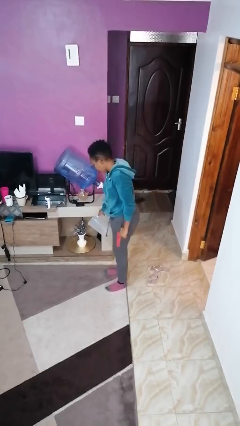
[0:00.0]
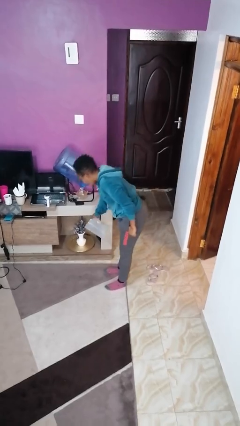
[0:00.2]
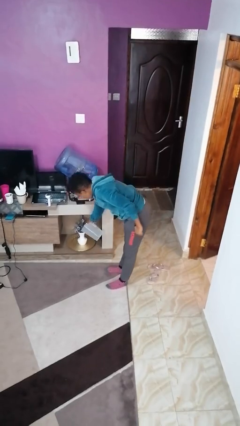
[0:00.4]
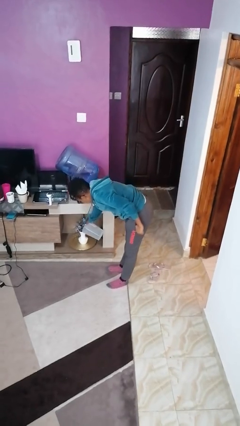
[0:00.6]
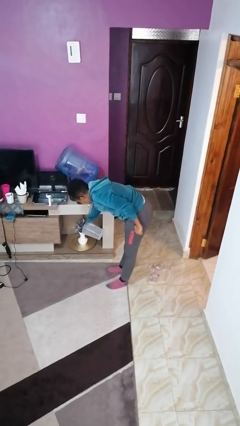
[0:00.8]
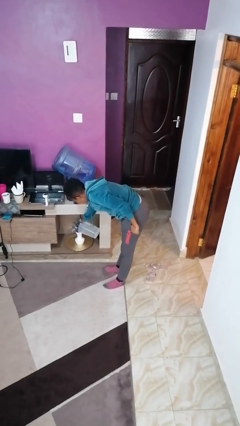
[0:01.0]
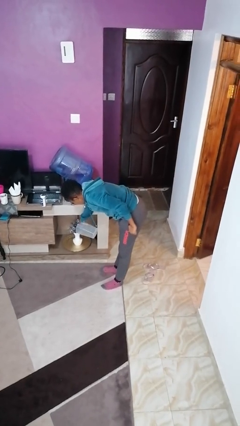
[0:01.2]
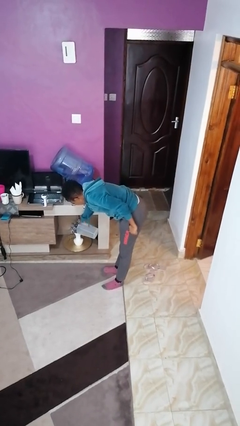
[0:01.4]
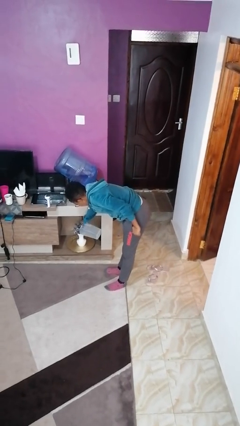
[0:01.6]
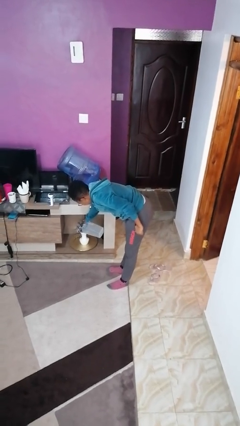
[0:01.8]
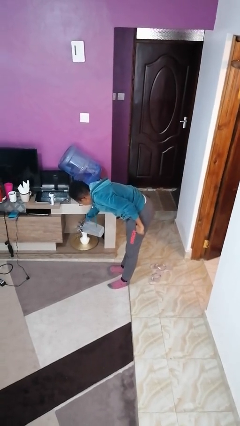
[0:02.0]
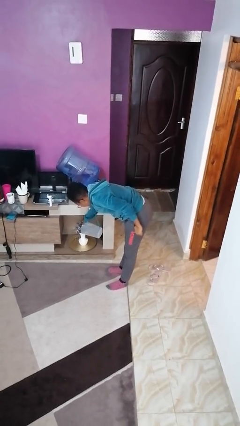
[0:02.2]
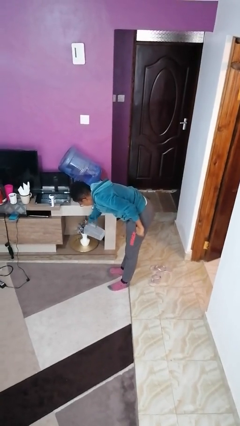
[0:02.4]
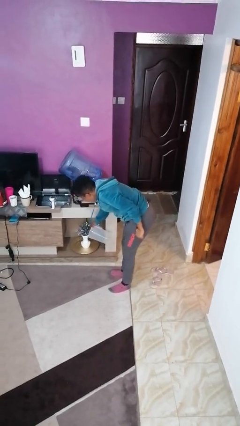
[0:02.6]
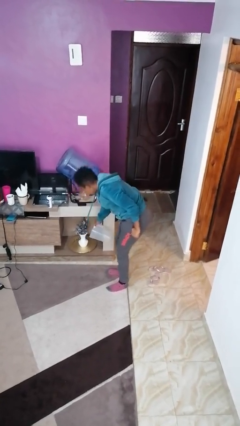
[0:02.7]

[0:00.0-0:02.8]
person waters houseplant

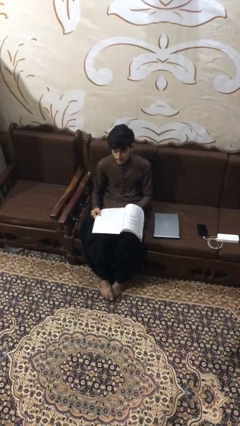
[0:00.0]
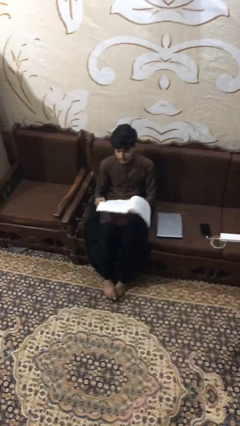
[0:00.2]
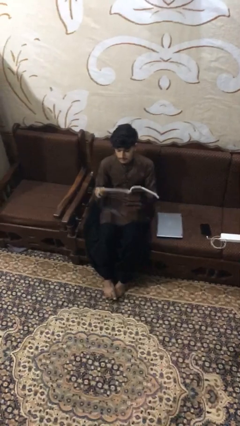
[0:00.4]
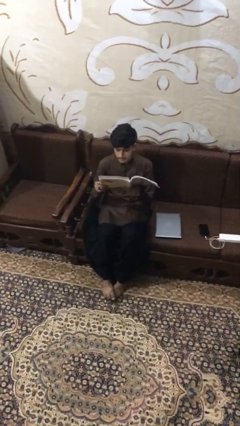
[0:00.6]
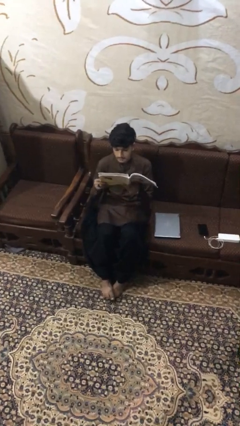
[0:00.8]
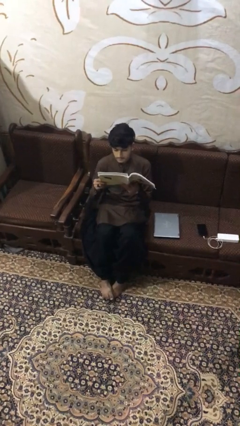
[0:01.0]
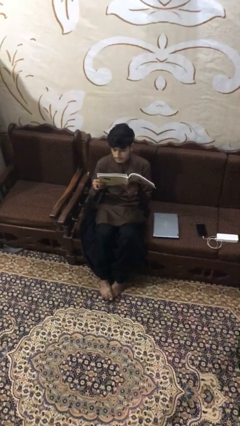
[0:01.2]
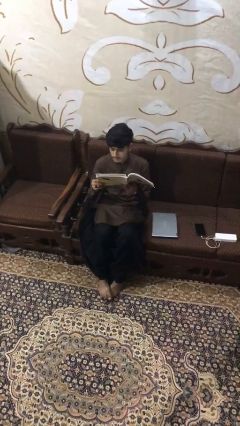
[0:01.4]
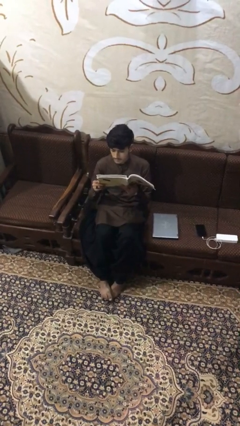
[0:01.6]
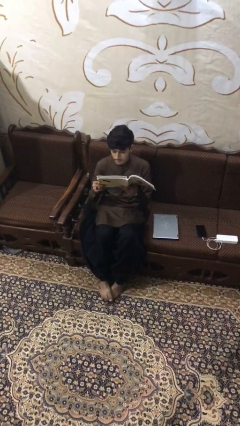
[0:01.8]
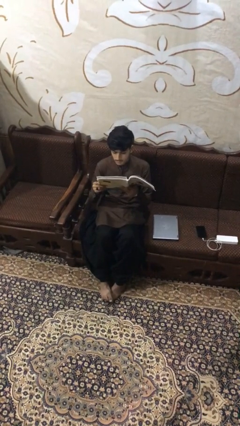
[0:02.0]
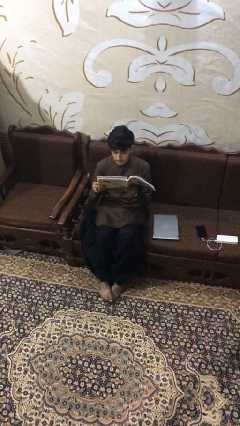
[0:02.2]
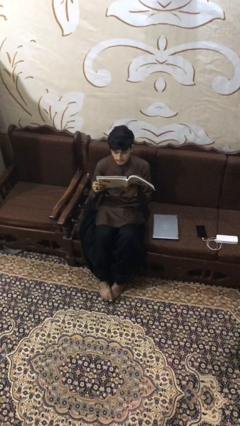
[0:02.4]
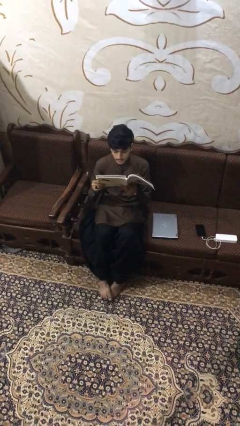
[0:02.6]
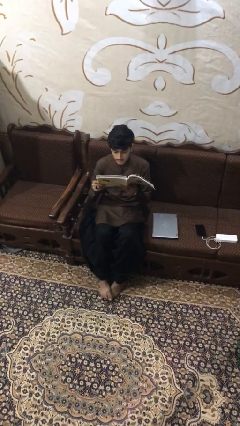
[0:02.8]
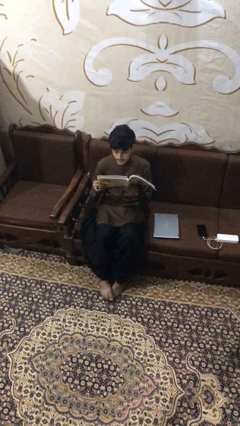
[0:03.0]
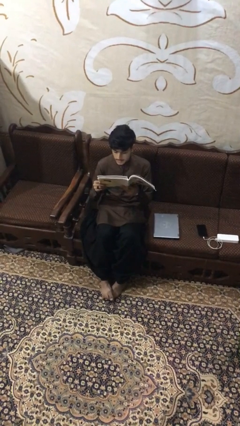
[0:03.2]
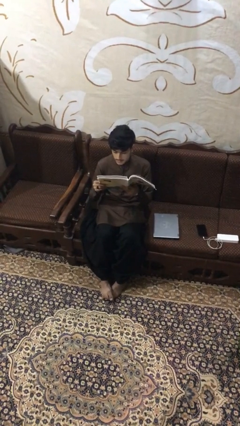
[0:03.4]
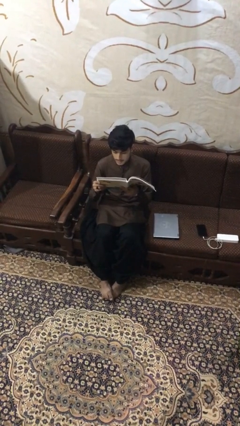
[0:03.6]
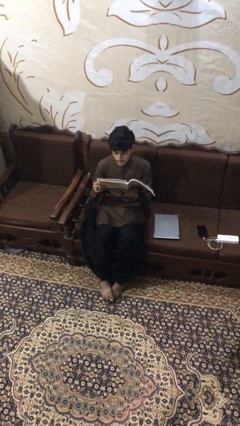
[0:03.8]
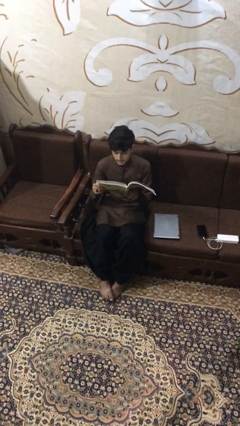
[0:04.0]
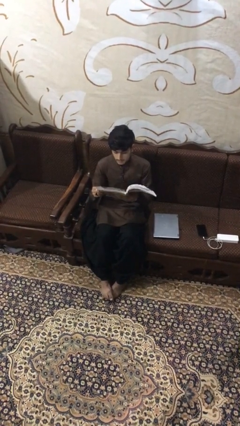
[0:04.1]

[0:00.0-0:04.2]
person reads document

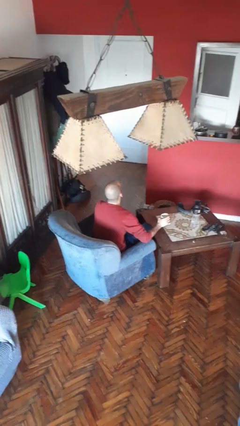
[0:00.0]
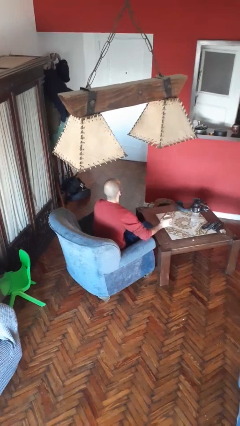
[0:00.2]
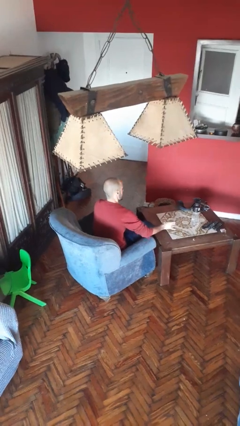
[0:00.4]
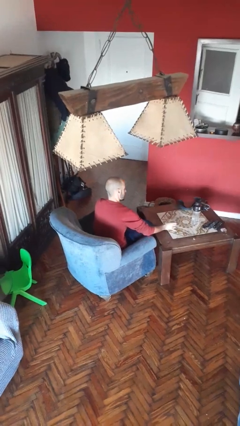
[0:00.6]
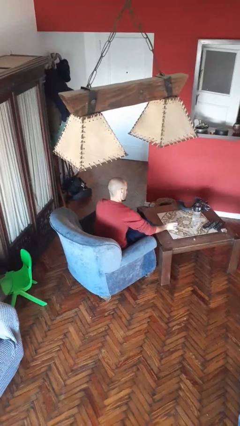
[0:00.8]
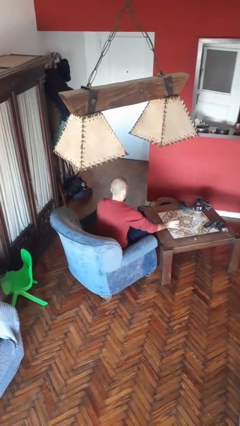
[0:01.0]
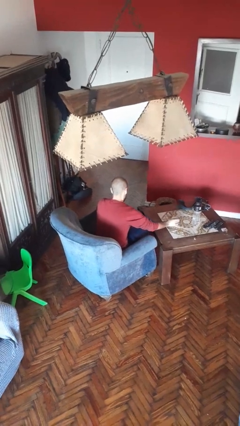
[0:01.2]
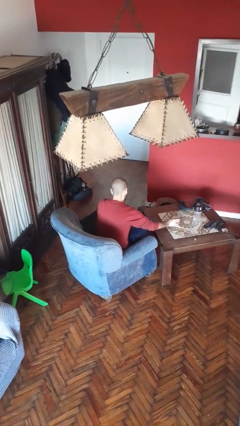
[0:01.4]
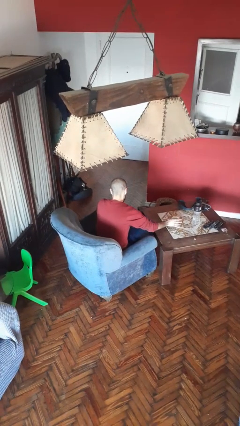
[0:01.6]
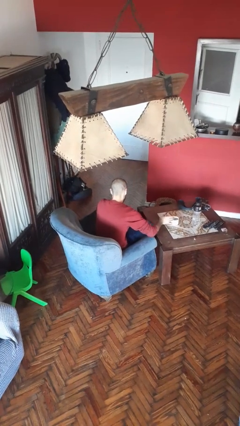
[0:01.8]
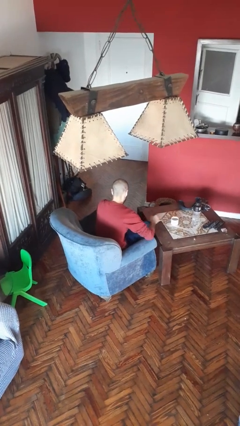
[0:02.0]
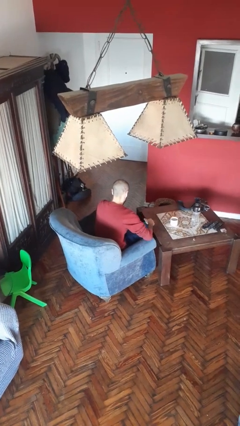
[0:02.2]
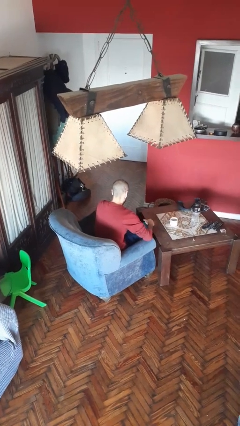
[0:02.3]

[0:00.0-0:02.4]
person puts down object on table

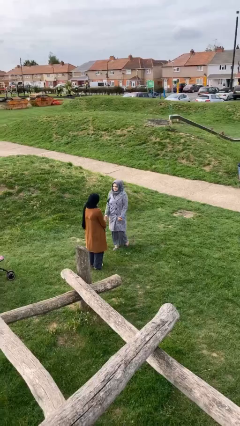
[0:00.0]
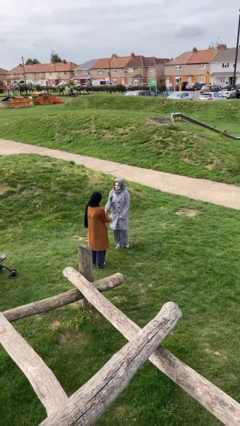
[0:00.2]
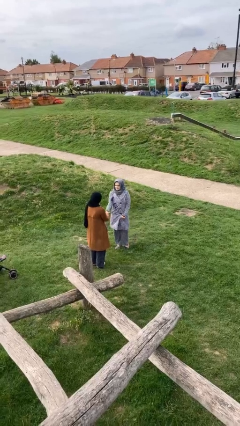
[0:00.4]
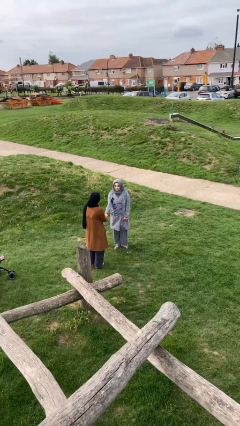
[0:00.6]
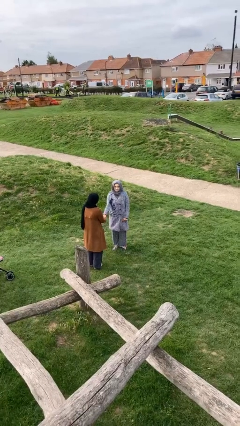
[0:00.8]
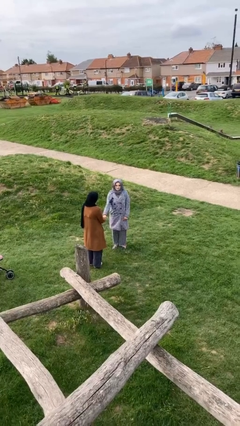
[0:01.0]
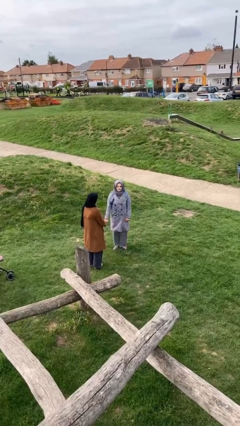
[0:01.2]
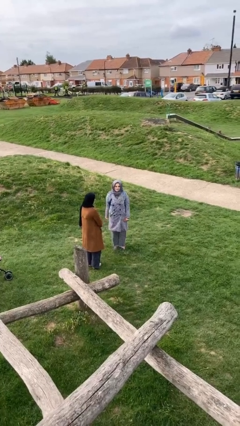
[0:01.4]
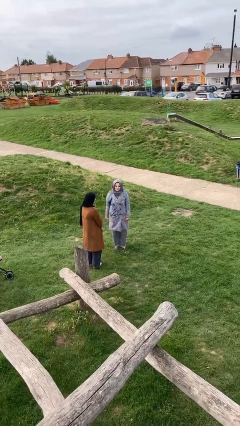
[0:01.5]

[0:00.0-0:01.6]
person shakes hand

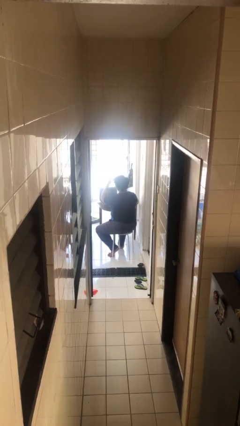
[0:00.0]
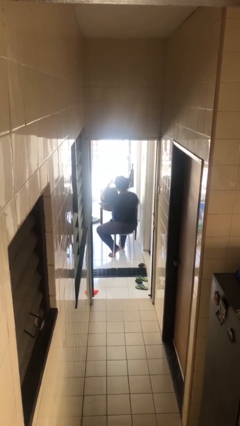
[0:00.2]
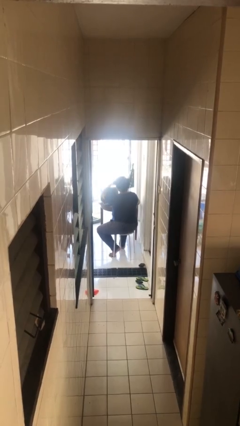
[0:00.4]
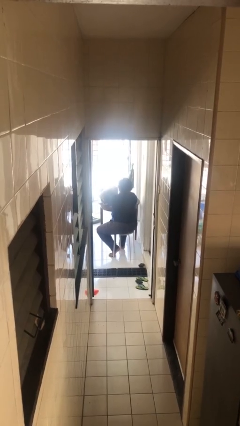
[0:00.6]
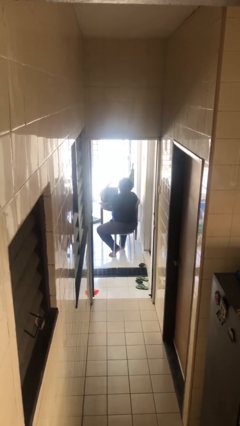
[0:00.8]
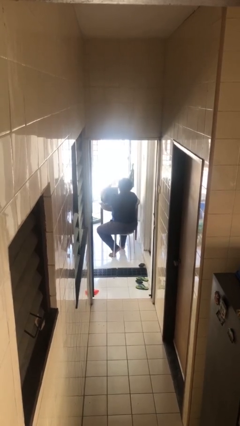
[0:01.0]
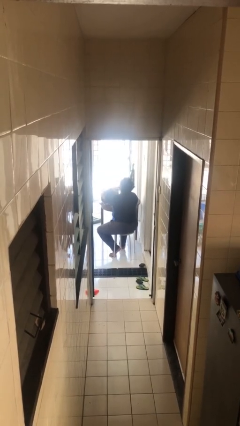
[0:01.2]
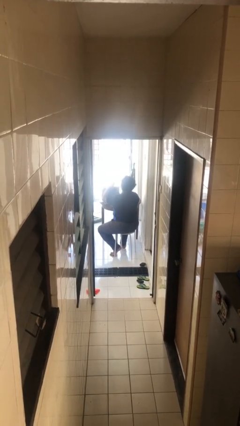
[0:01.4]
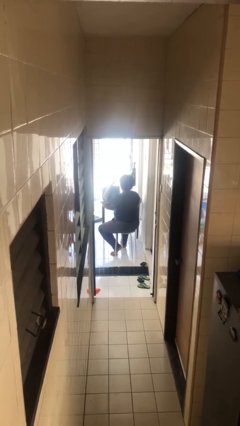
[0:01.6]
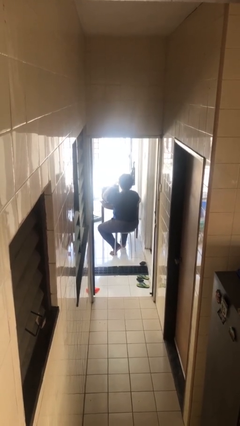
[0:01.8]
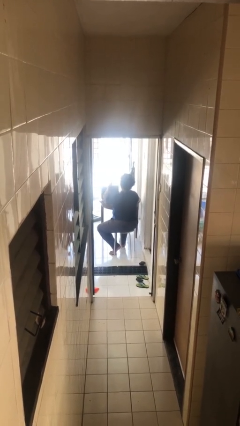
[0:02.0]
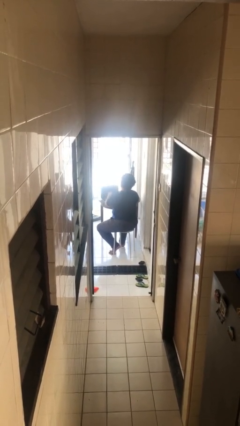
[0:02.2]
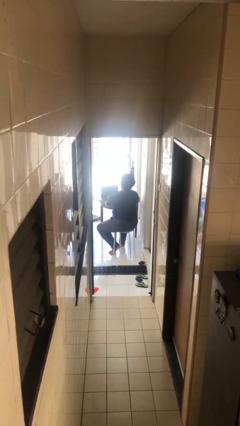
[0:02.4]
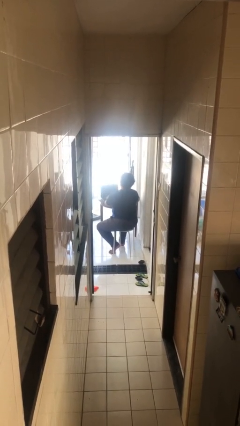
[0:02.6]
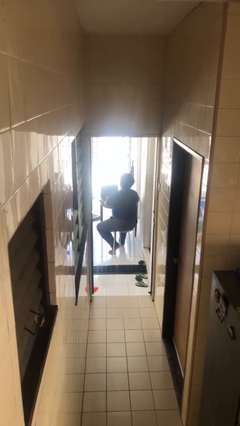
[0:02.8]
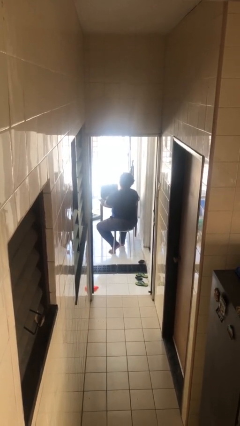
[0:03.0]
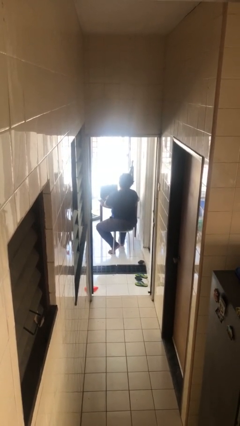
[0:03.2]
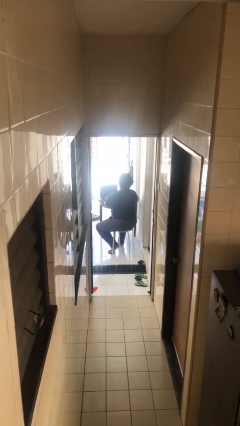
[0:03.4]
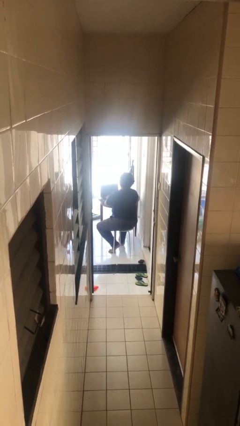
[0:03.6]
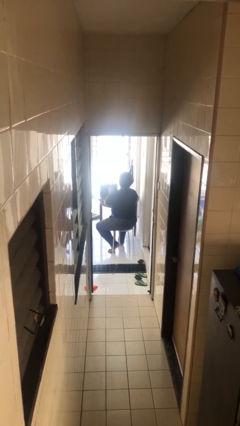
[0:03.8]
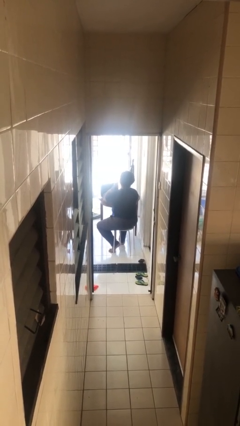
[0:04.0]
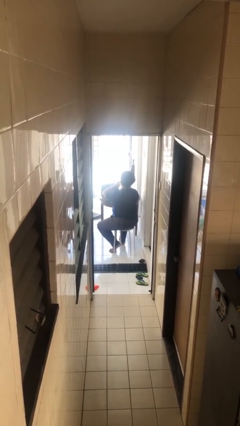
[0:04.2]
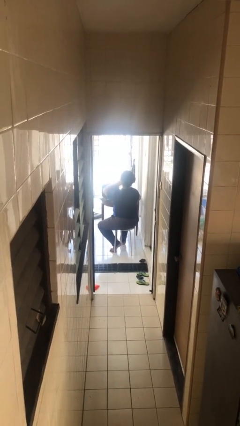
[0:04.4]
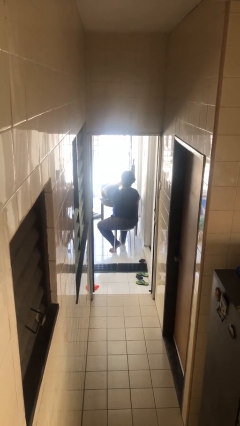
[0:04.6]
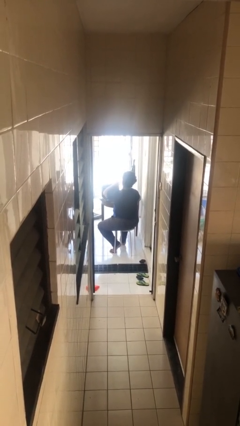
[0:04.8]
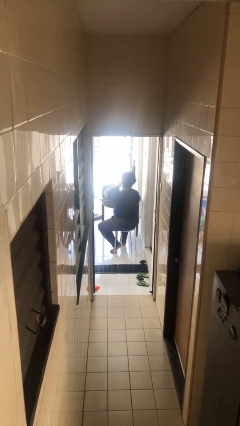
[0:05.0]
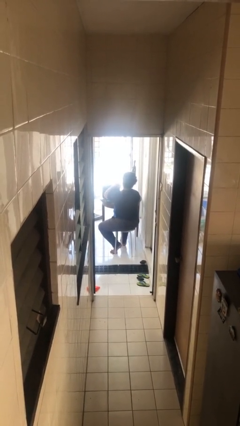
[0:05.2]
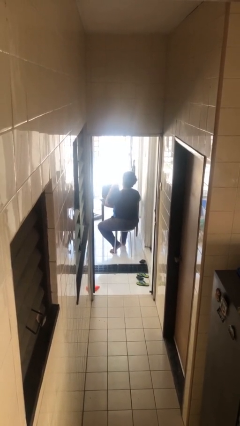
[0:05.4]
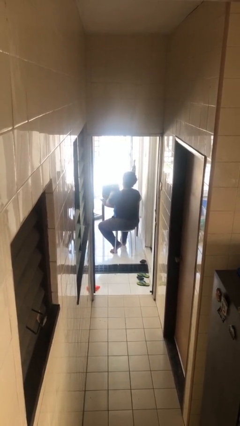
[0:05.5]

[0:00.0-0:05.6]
person interacts with laptop

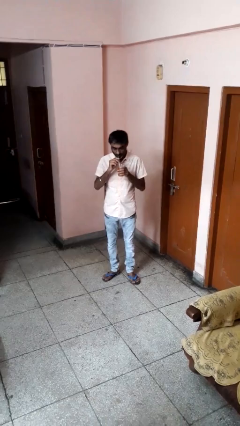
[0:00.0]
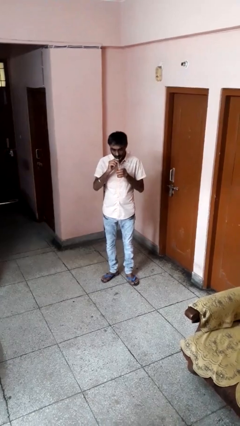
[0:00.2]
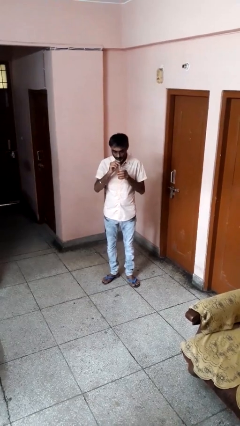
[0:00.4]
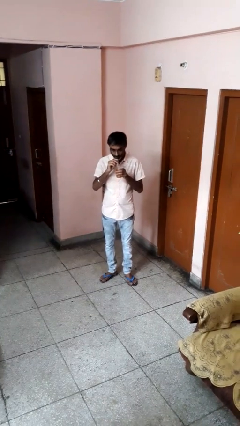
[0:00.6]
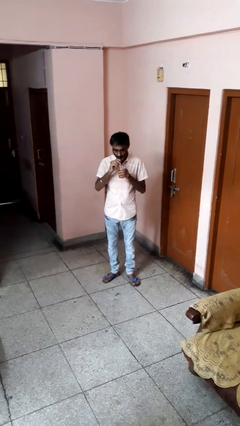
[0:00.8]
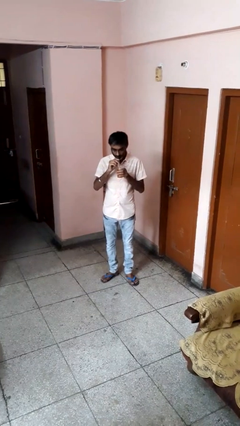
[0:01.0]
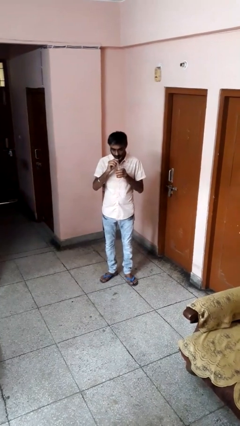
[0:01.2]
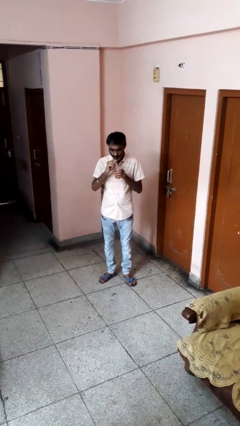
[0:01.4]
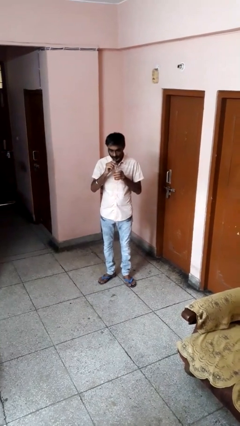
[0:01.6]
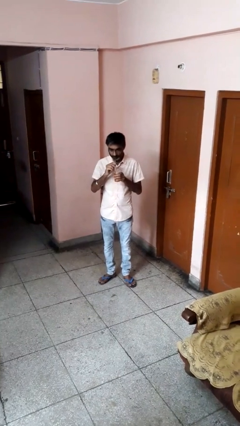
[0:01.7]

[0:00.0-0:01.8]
person drinks from straw
